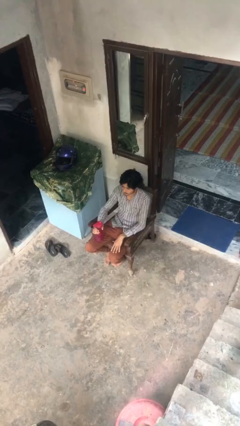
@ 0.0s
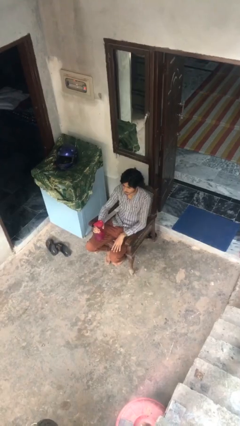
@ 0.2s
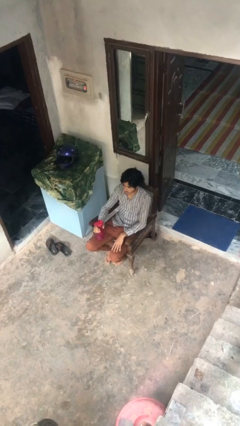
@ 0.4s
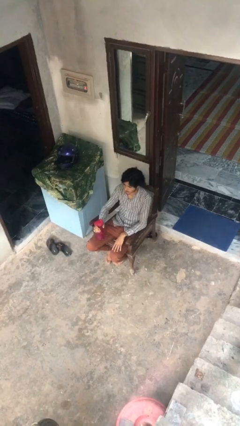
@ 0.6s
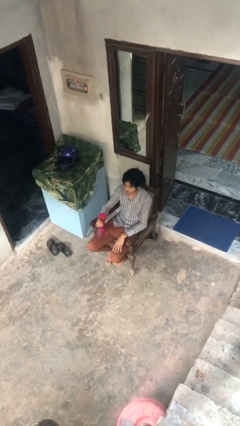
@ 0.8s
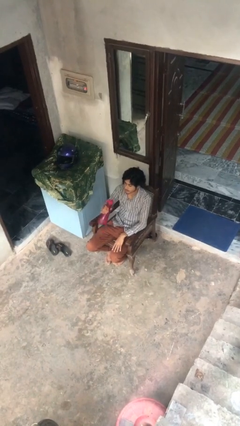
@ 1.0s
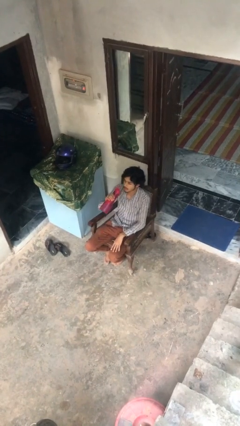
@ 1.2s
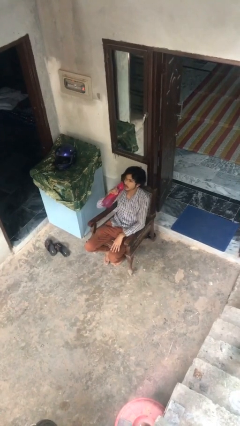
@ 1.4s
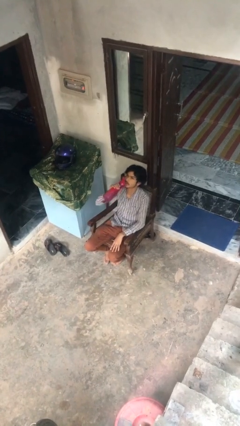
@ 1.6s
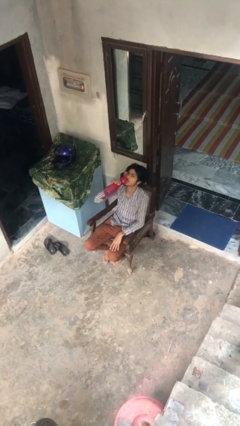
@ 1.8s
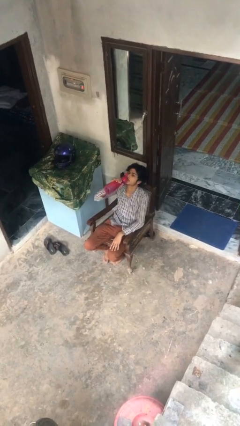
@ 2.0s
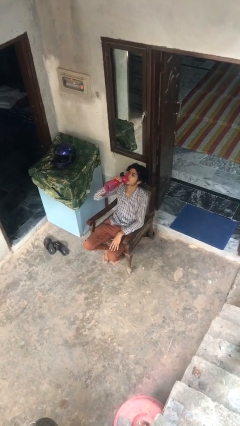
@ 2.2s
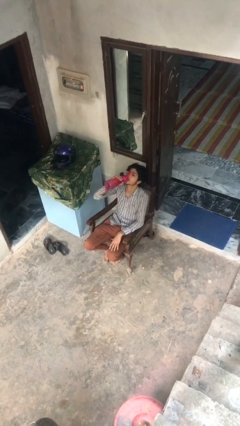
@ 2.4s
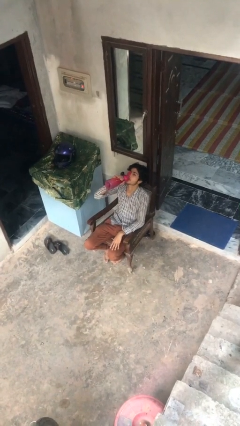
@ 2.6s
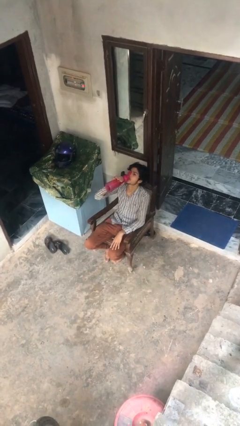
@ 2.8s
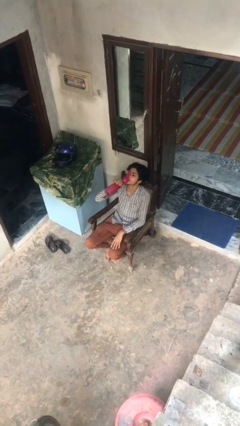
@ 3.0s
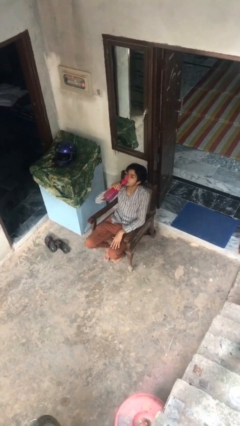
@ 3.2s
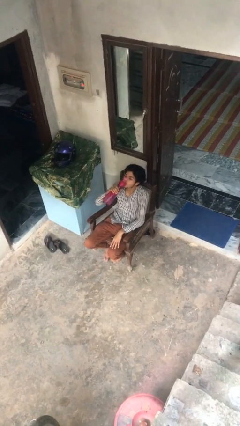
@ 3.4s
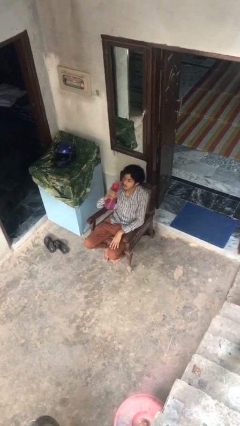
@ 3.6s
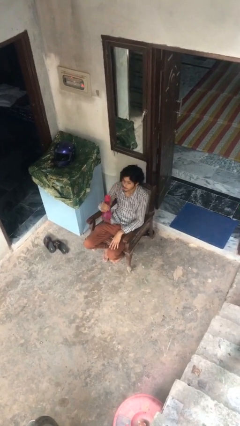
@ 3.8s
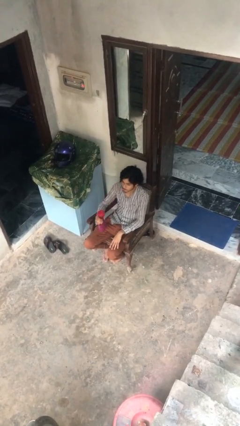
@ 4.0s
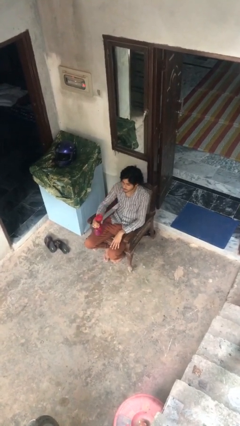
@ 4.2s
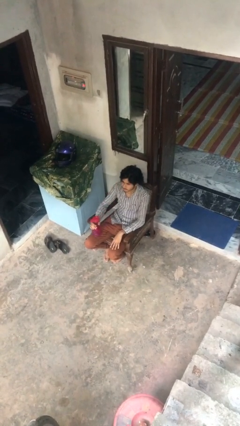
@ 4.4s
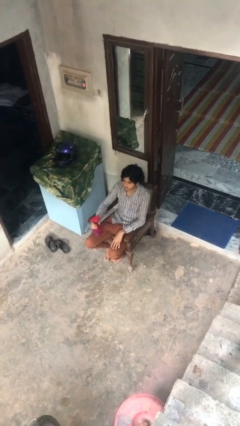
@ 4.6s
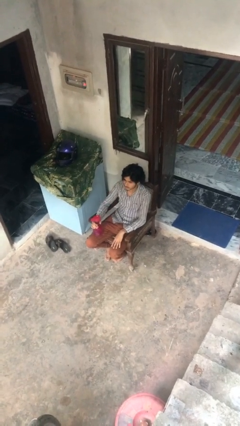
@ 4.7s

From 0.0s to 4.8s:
person drinks from bottle

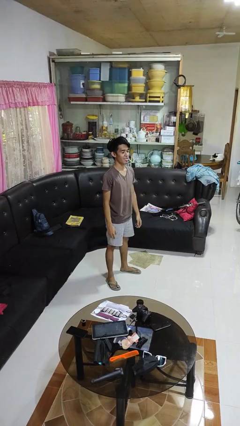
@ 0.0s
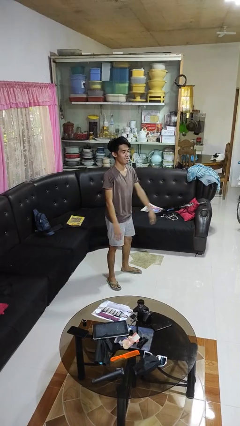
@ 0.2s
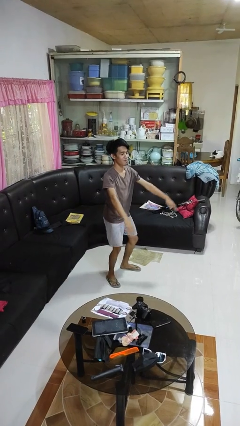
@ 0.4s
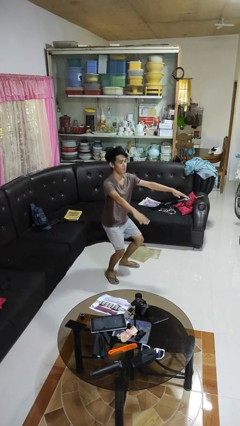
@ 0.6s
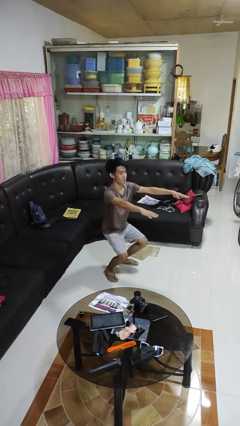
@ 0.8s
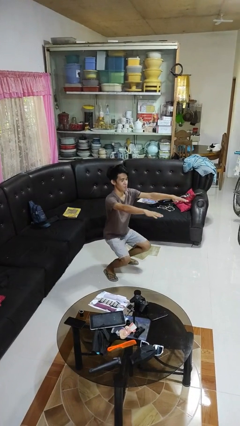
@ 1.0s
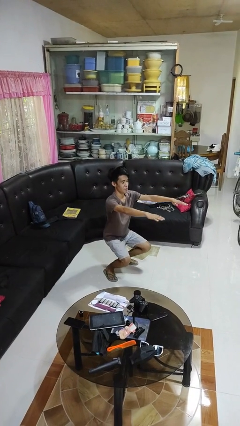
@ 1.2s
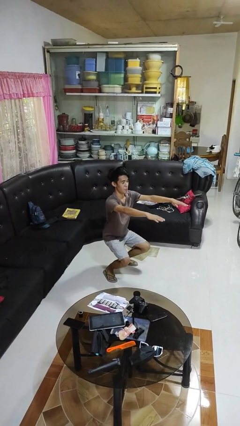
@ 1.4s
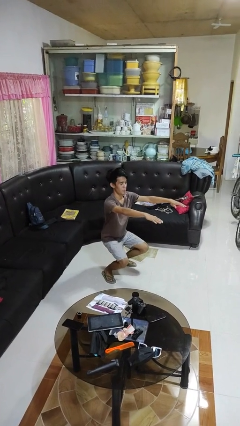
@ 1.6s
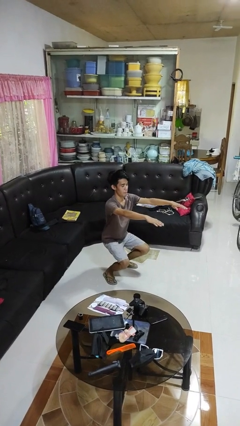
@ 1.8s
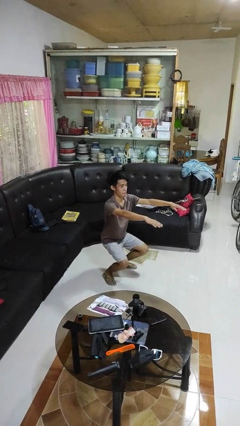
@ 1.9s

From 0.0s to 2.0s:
person squats

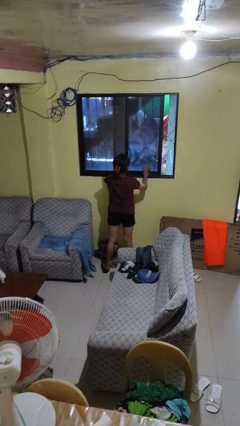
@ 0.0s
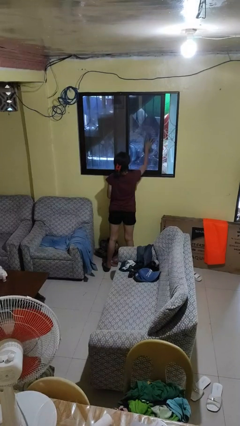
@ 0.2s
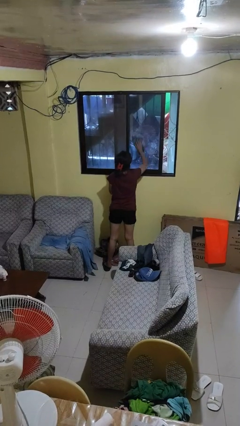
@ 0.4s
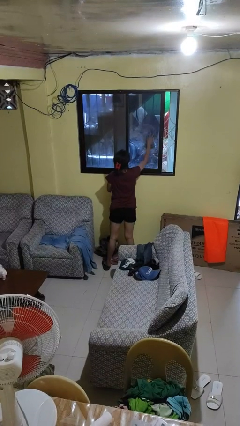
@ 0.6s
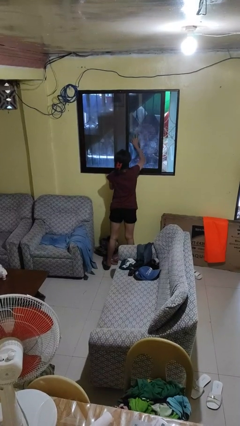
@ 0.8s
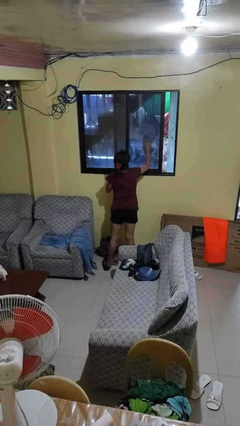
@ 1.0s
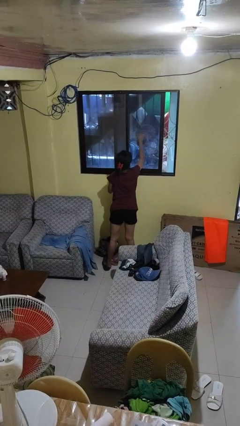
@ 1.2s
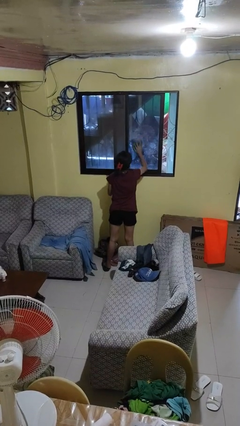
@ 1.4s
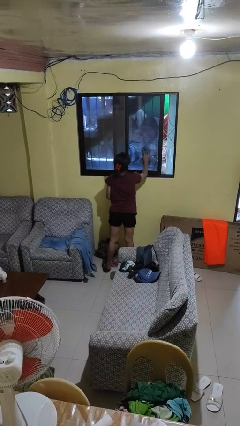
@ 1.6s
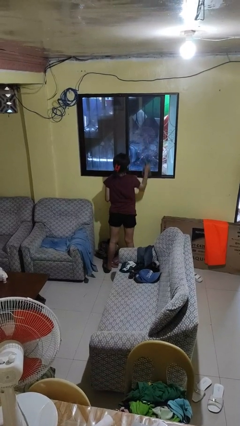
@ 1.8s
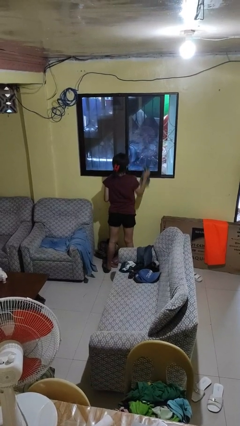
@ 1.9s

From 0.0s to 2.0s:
person washes window

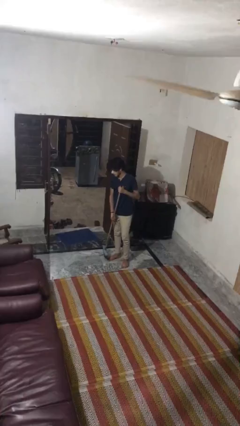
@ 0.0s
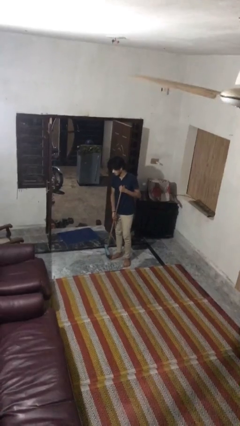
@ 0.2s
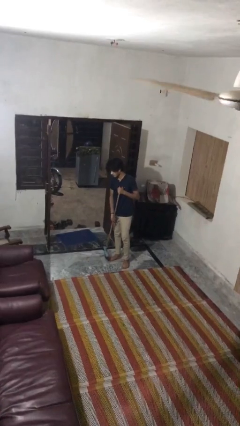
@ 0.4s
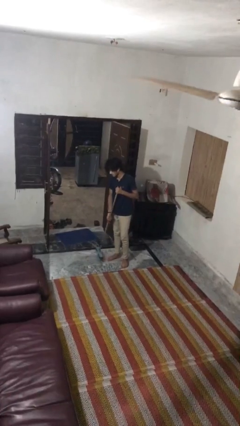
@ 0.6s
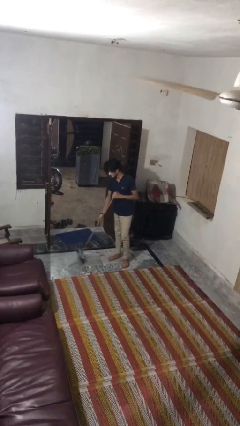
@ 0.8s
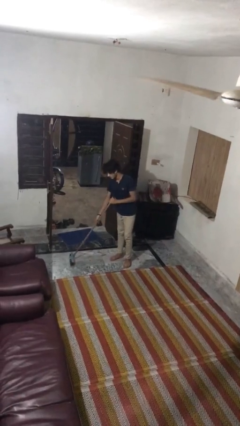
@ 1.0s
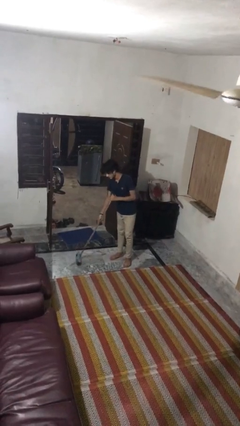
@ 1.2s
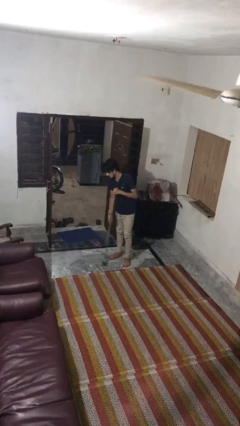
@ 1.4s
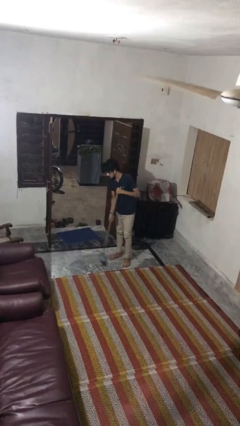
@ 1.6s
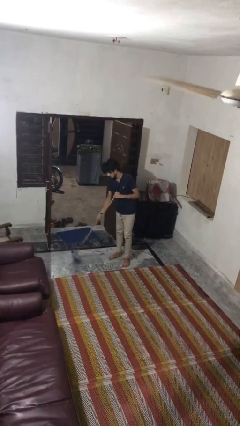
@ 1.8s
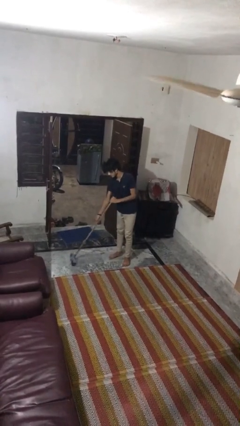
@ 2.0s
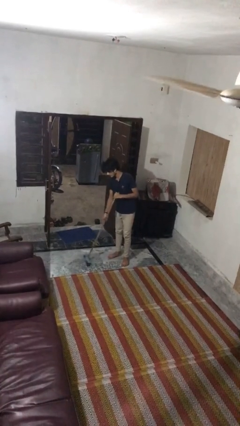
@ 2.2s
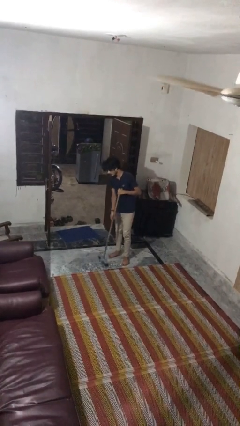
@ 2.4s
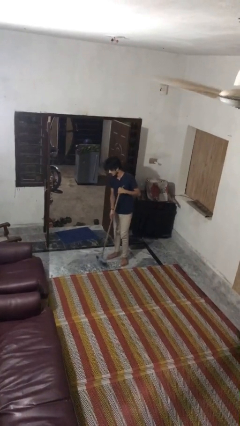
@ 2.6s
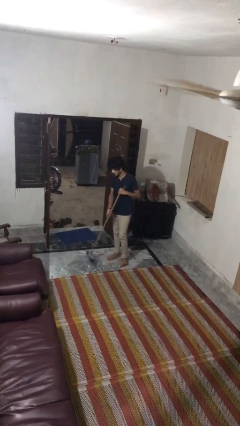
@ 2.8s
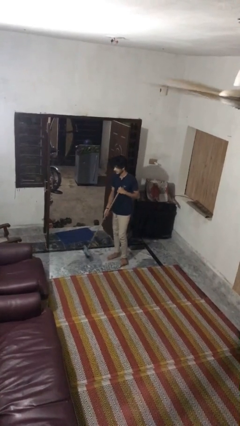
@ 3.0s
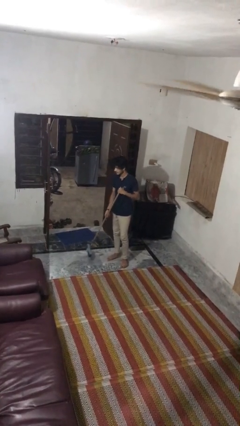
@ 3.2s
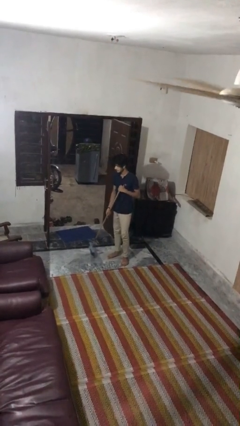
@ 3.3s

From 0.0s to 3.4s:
person sweeps floor

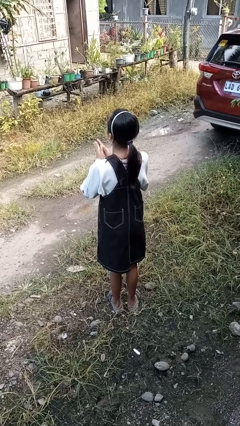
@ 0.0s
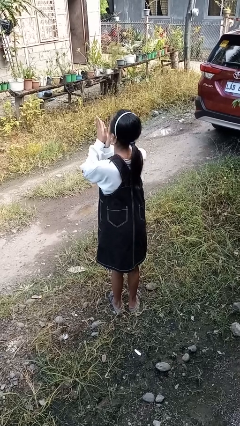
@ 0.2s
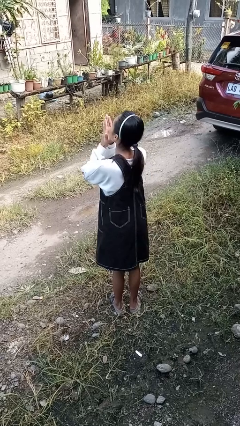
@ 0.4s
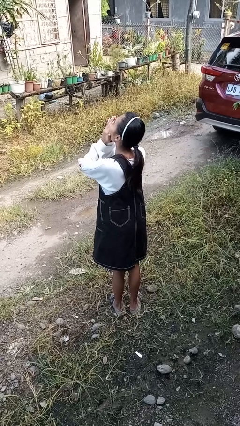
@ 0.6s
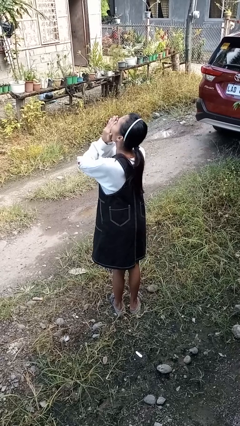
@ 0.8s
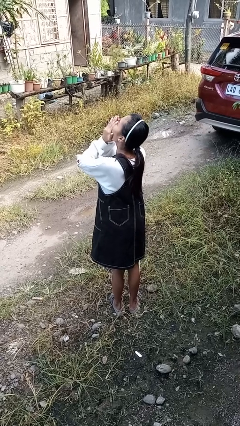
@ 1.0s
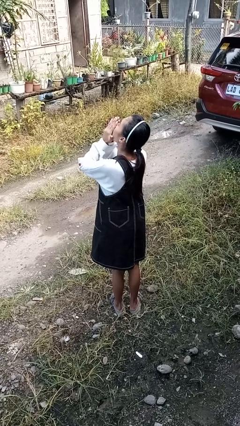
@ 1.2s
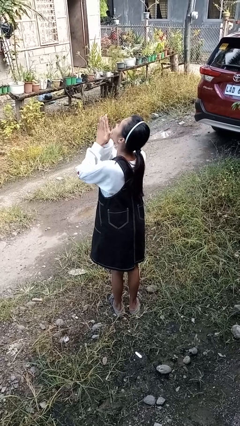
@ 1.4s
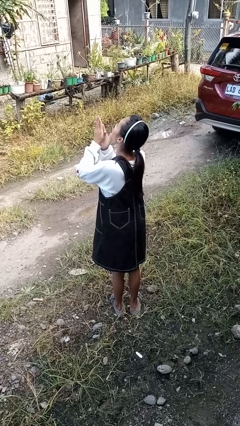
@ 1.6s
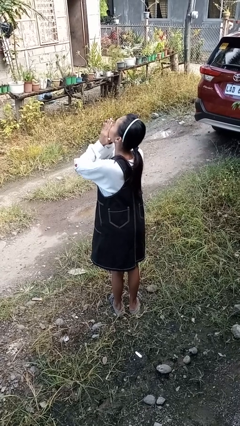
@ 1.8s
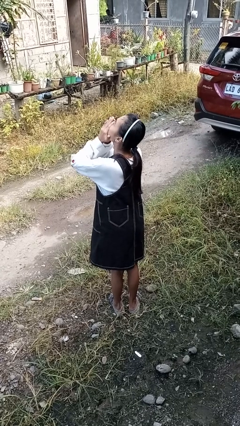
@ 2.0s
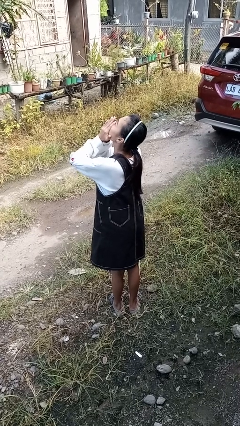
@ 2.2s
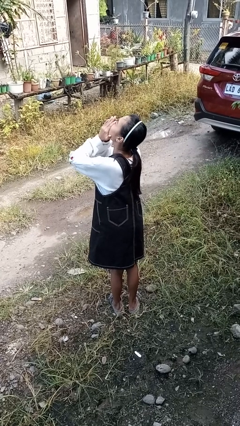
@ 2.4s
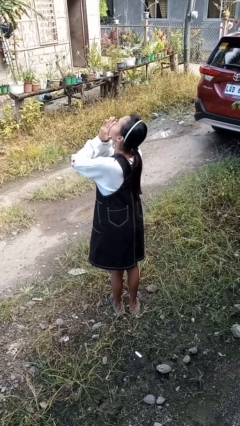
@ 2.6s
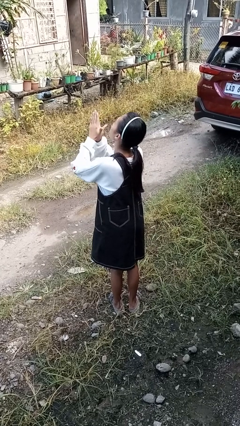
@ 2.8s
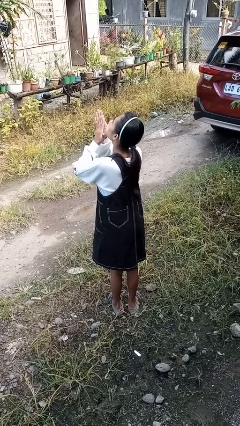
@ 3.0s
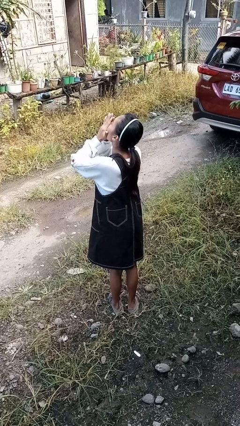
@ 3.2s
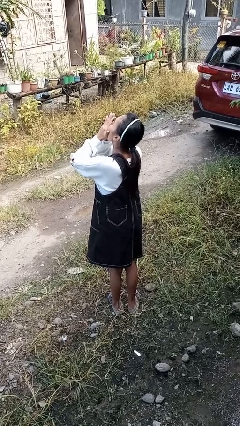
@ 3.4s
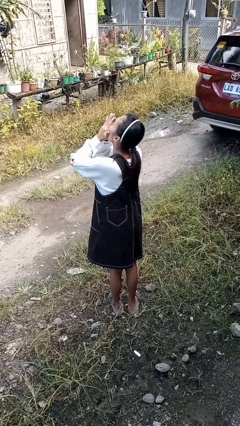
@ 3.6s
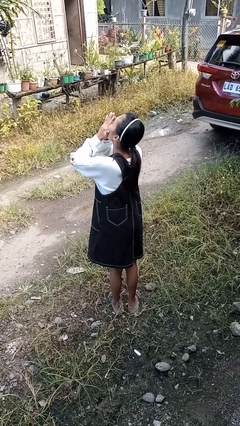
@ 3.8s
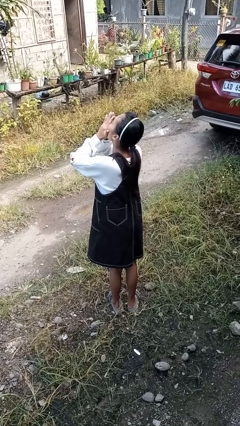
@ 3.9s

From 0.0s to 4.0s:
person blows into hands

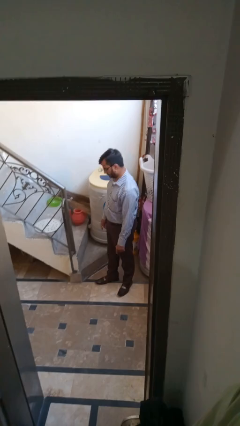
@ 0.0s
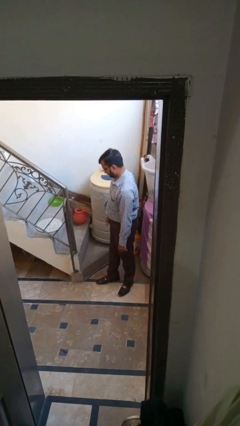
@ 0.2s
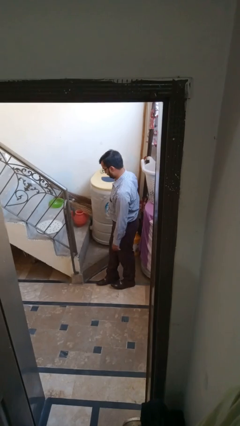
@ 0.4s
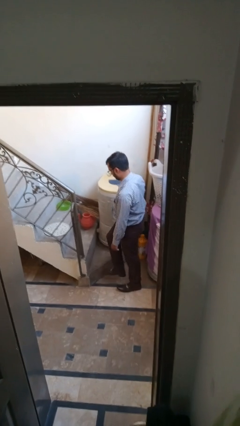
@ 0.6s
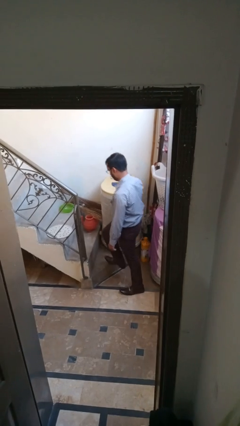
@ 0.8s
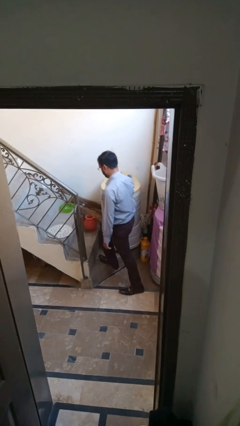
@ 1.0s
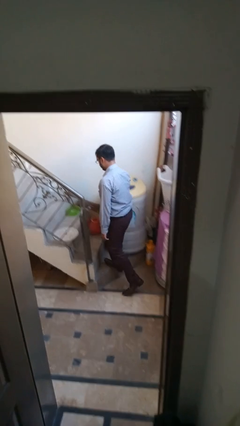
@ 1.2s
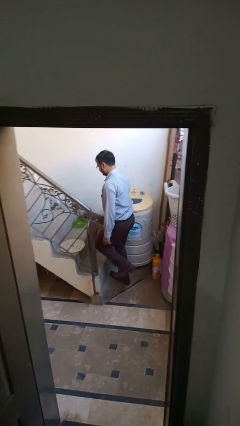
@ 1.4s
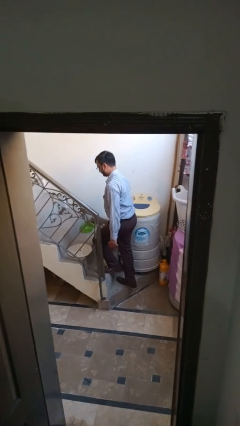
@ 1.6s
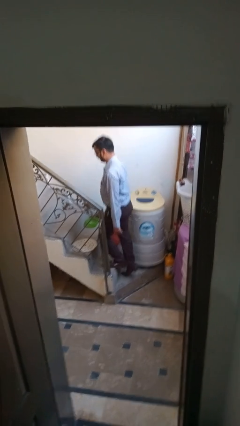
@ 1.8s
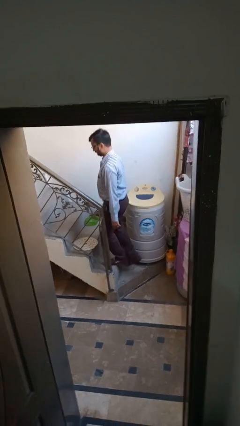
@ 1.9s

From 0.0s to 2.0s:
person climbs up stairs
